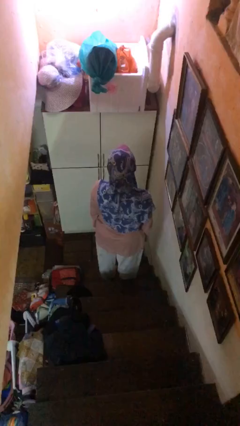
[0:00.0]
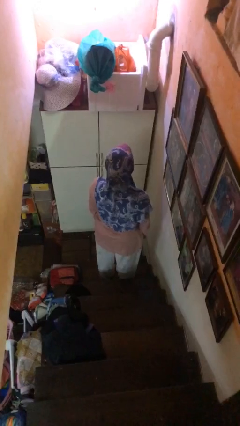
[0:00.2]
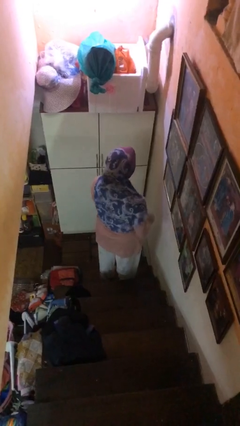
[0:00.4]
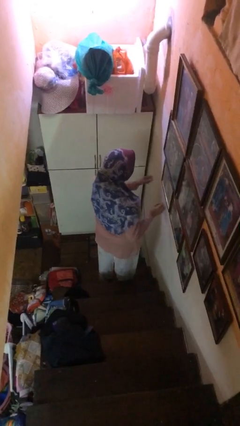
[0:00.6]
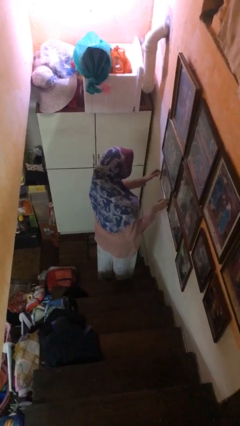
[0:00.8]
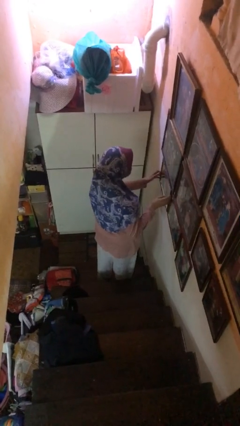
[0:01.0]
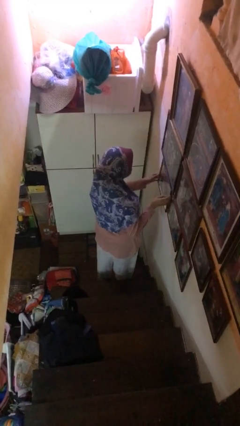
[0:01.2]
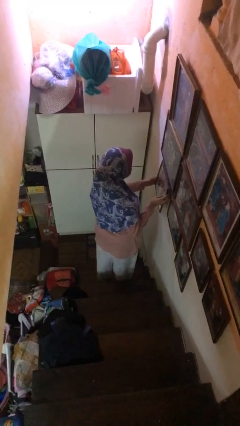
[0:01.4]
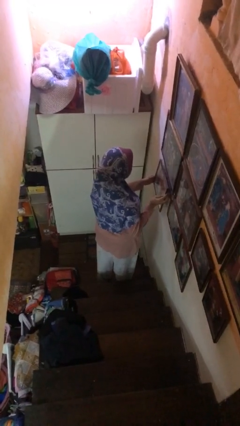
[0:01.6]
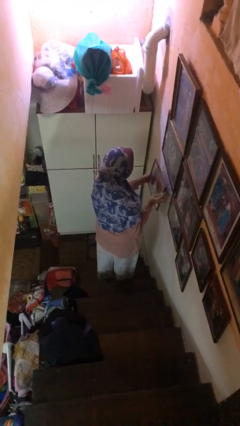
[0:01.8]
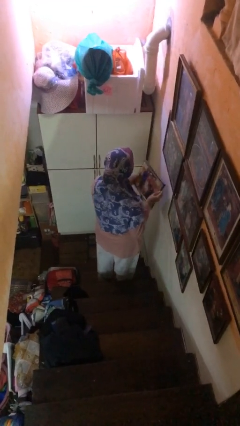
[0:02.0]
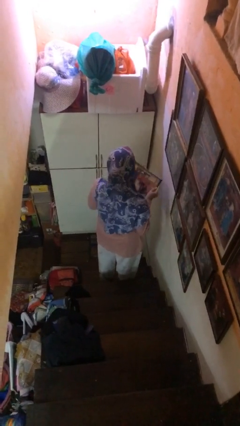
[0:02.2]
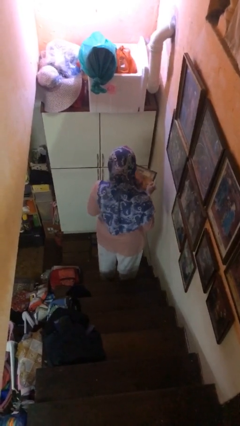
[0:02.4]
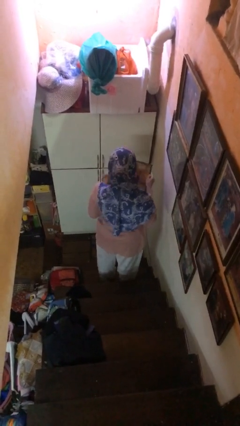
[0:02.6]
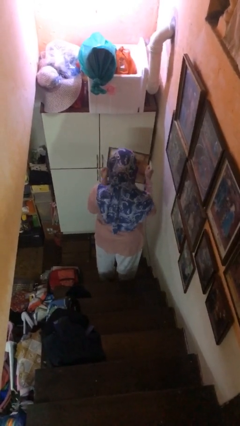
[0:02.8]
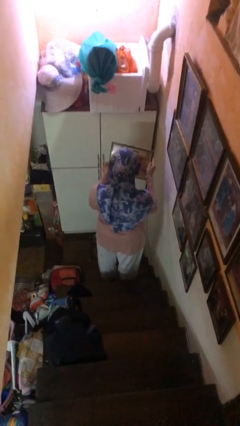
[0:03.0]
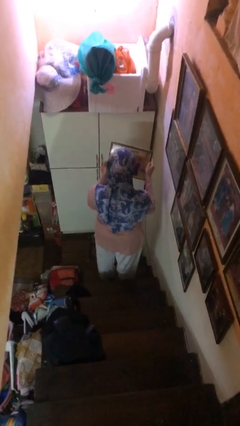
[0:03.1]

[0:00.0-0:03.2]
person puts up picture frame

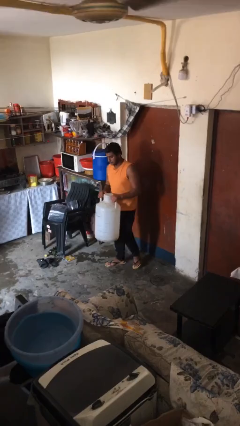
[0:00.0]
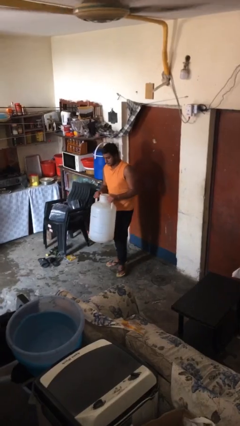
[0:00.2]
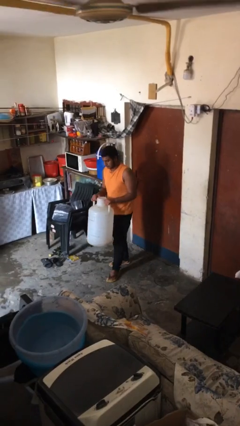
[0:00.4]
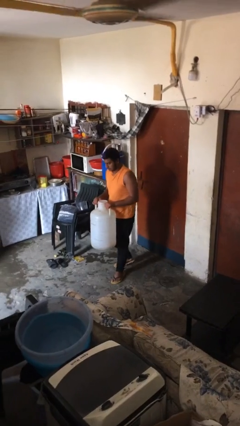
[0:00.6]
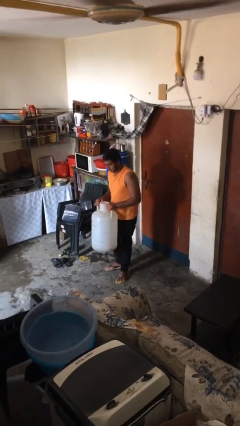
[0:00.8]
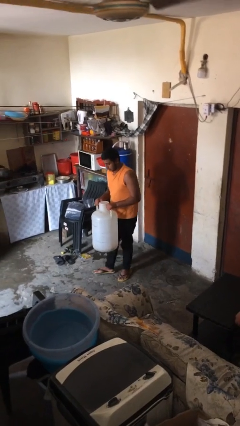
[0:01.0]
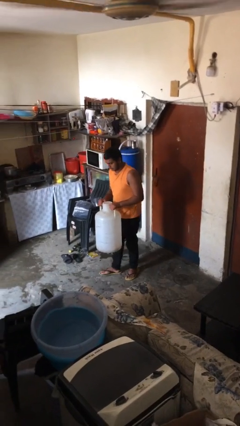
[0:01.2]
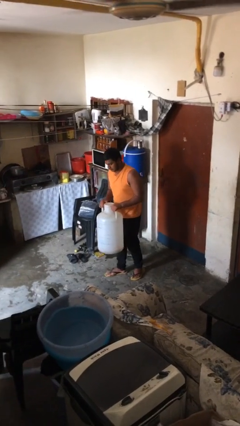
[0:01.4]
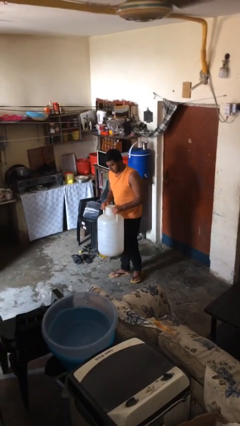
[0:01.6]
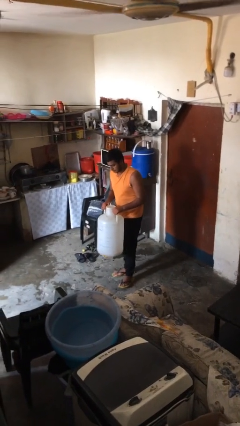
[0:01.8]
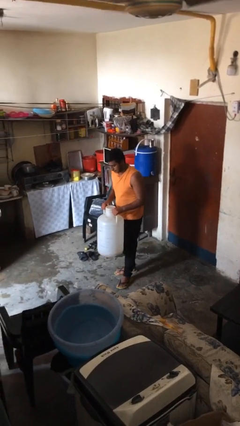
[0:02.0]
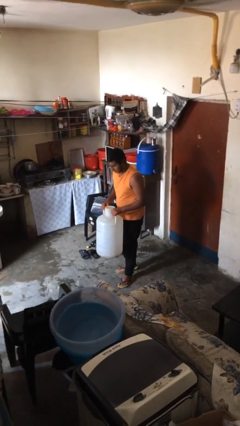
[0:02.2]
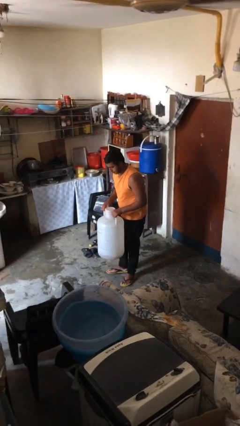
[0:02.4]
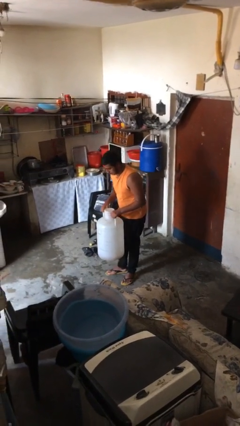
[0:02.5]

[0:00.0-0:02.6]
person carries heavy object

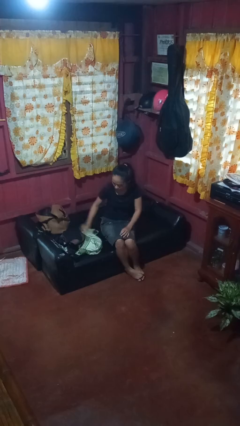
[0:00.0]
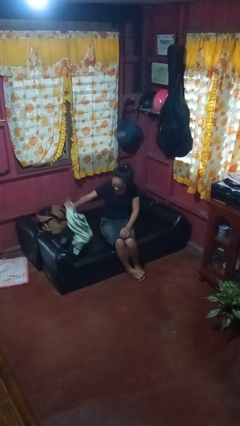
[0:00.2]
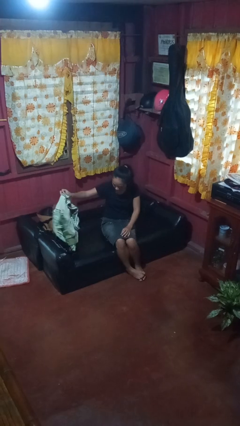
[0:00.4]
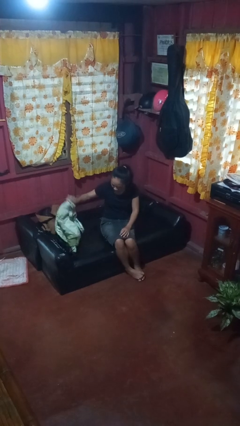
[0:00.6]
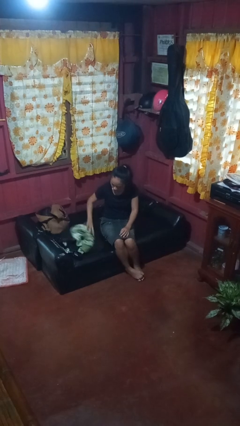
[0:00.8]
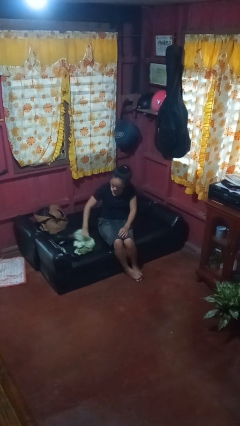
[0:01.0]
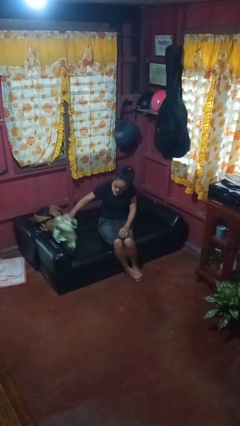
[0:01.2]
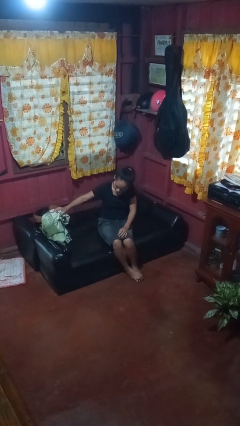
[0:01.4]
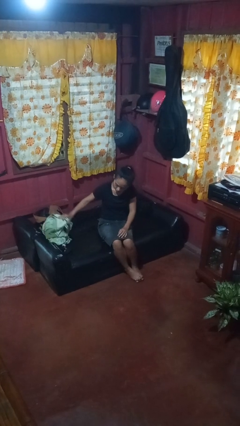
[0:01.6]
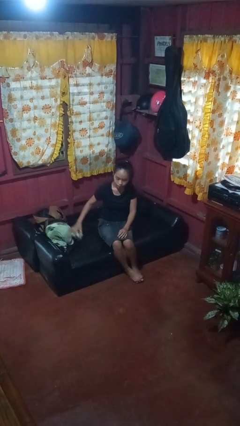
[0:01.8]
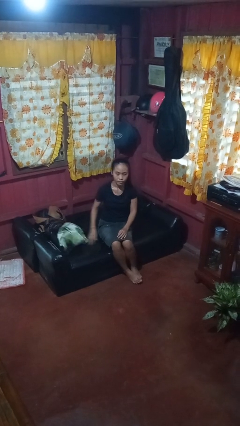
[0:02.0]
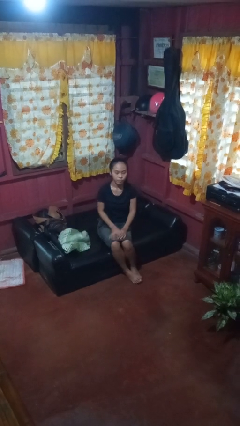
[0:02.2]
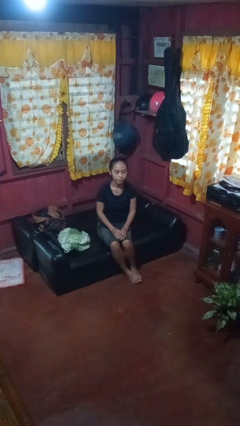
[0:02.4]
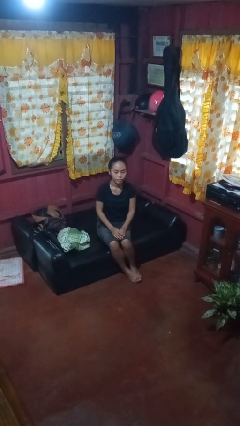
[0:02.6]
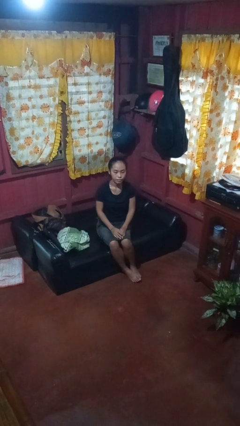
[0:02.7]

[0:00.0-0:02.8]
person searches in couch

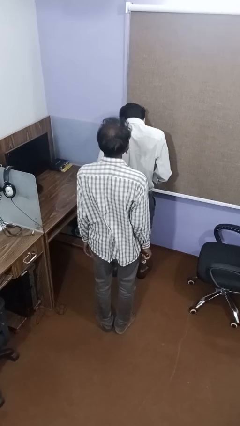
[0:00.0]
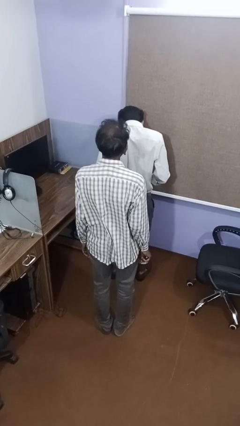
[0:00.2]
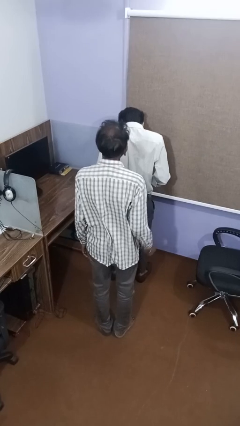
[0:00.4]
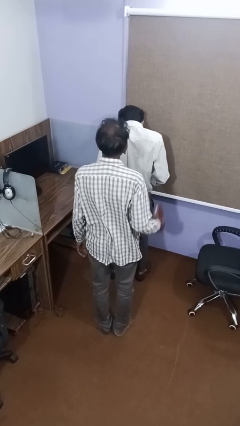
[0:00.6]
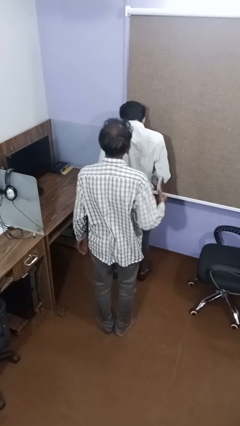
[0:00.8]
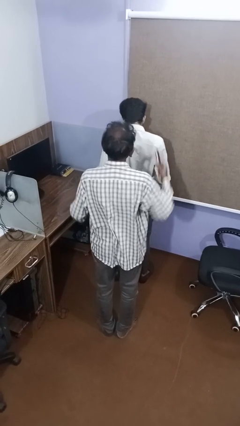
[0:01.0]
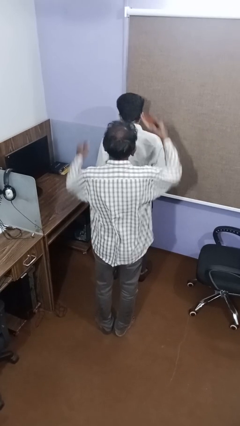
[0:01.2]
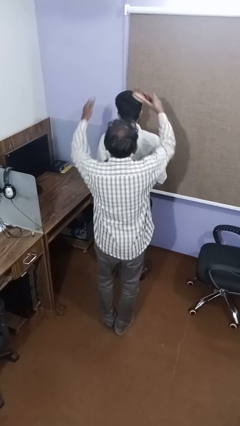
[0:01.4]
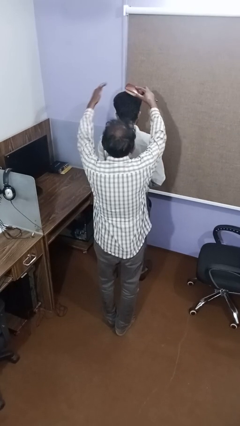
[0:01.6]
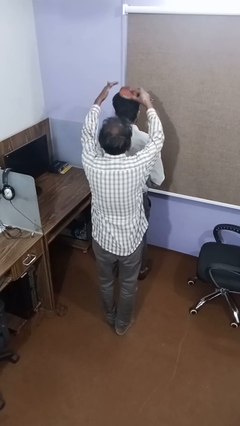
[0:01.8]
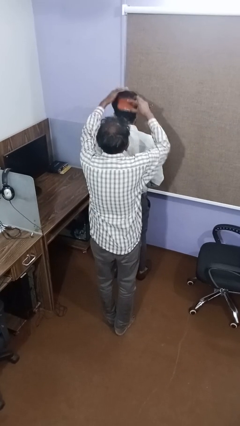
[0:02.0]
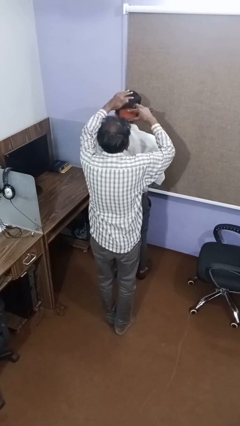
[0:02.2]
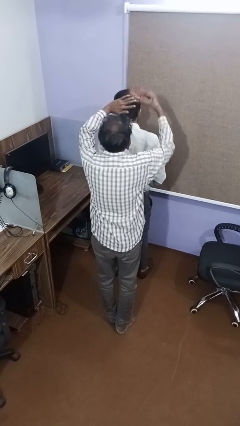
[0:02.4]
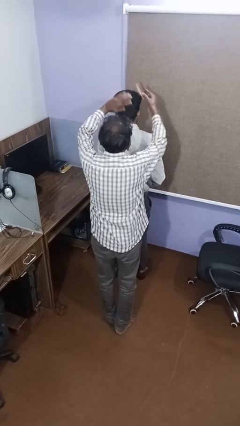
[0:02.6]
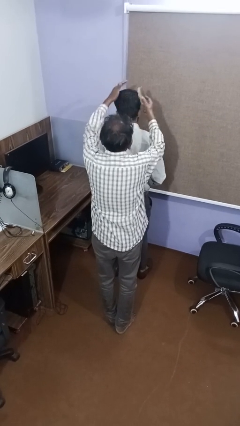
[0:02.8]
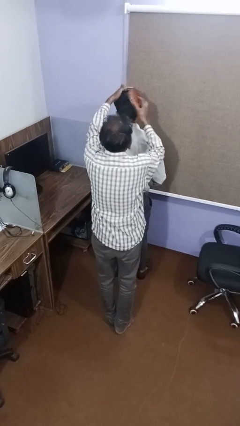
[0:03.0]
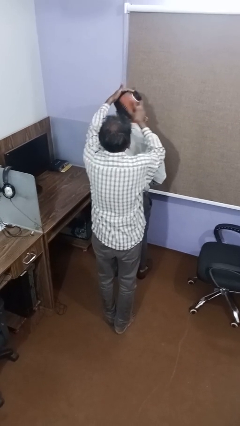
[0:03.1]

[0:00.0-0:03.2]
person brushes hair of person

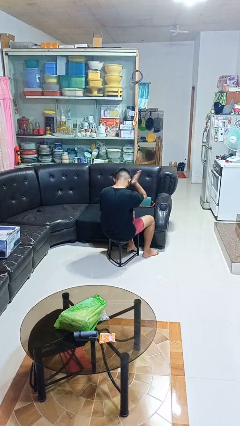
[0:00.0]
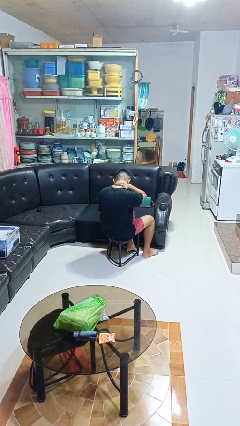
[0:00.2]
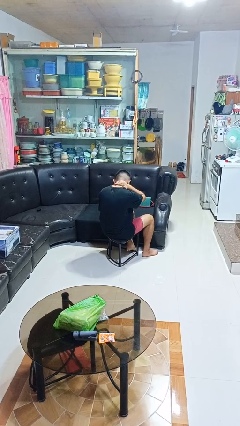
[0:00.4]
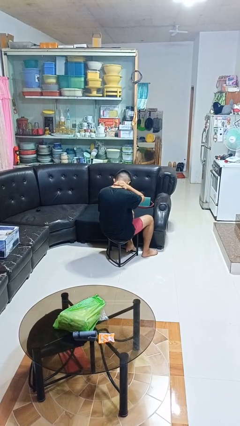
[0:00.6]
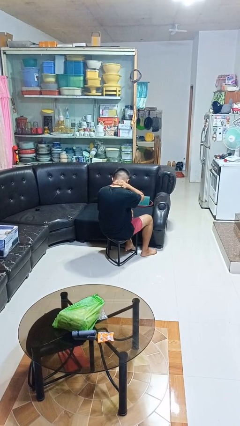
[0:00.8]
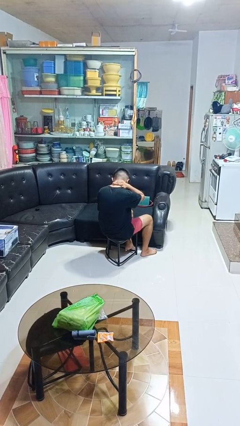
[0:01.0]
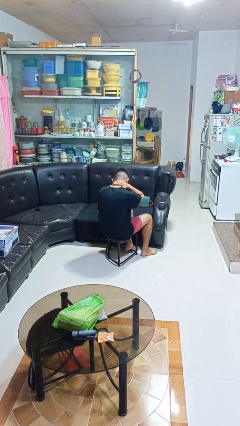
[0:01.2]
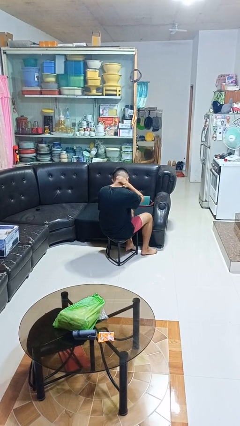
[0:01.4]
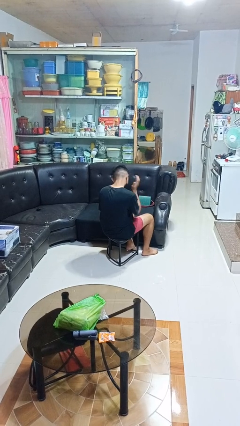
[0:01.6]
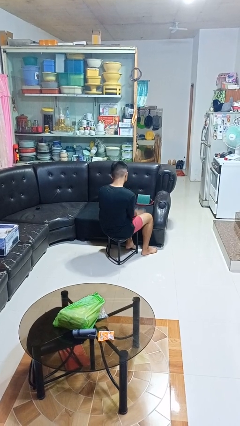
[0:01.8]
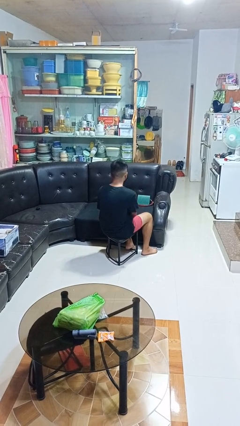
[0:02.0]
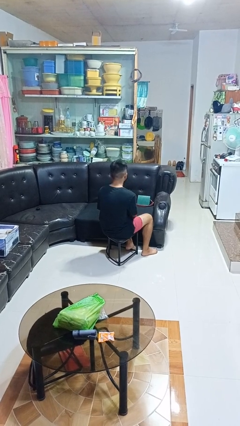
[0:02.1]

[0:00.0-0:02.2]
person swats bug

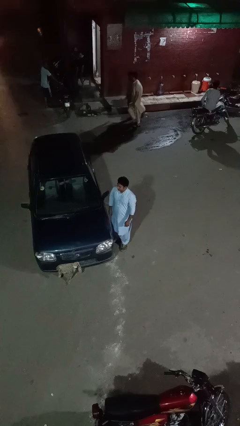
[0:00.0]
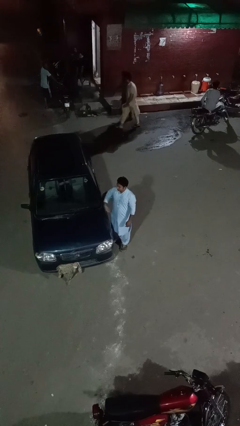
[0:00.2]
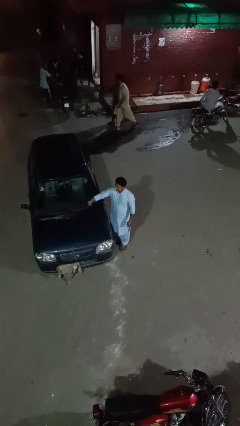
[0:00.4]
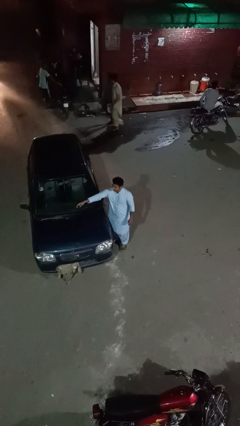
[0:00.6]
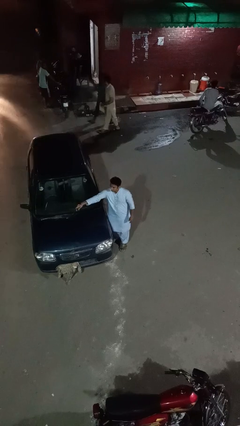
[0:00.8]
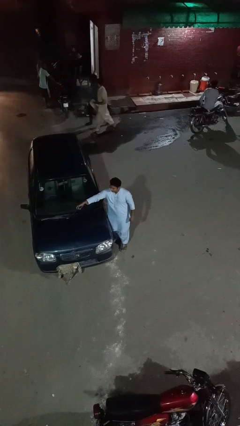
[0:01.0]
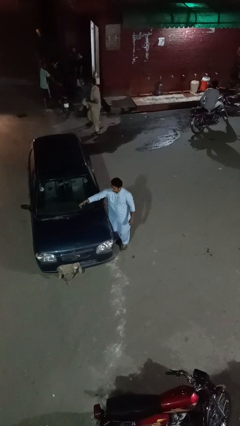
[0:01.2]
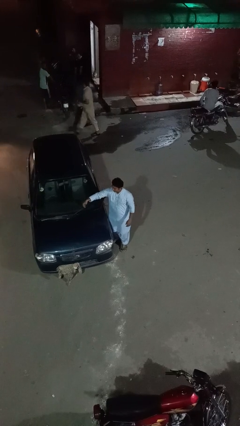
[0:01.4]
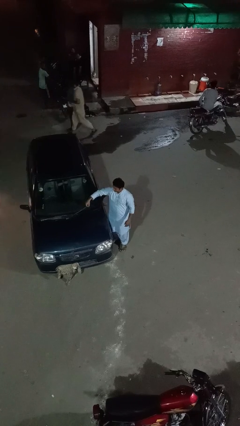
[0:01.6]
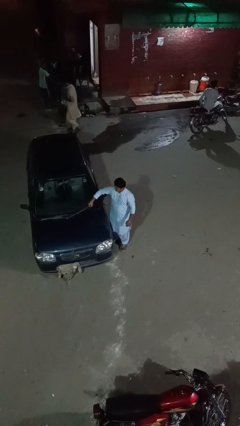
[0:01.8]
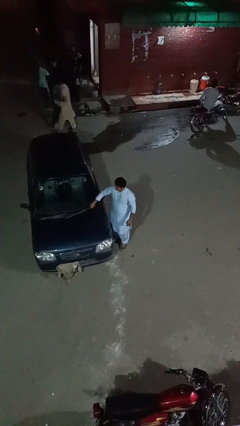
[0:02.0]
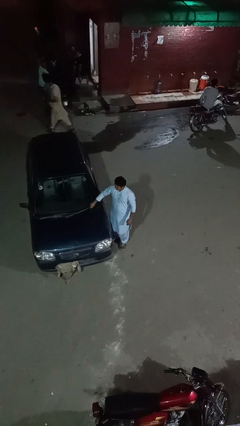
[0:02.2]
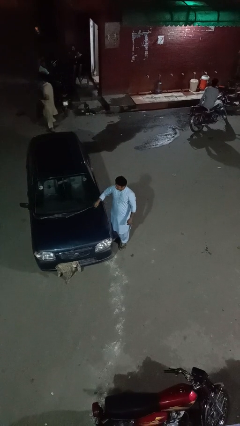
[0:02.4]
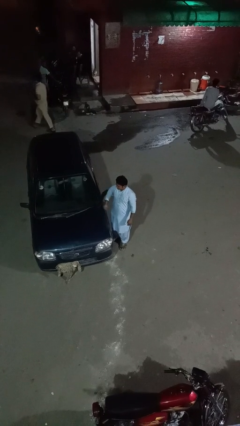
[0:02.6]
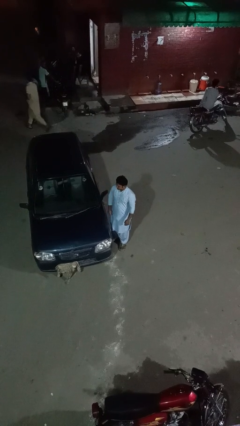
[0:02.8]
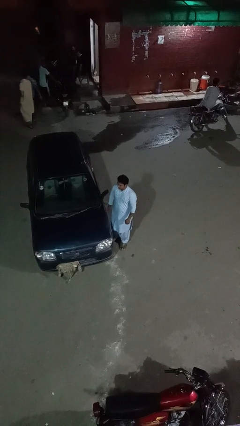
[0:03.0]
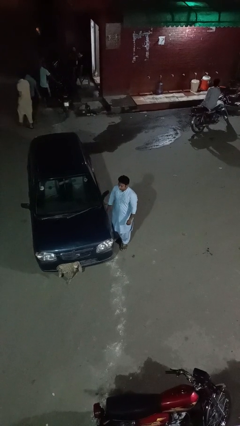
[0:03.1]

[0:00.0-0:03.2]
person flips down car wipers

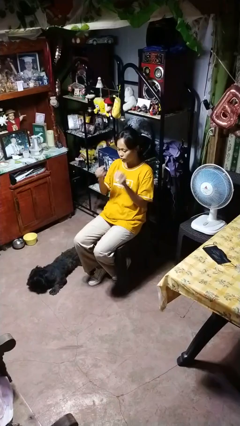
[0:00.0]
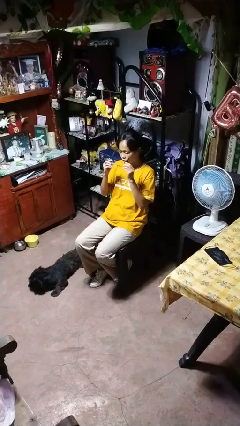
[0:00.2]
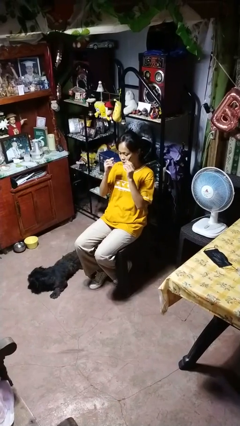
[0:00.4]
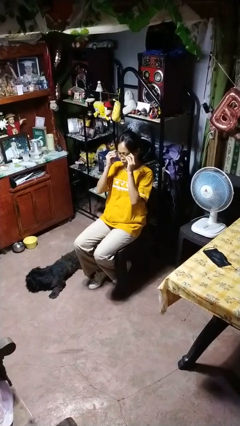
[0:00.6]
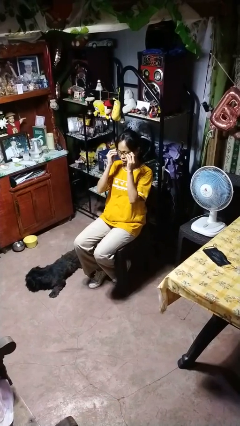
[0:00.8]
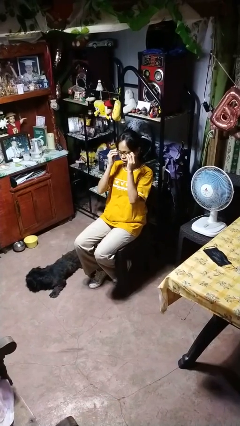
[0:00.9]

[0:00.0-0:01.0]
person puts on glasses
